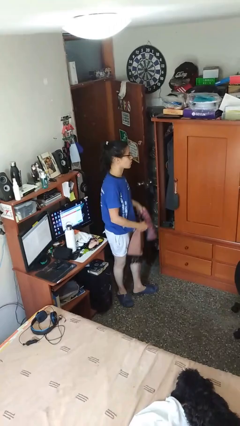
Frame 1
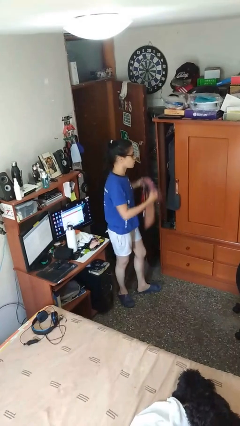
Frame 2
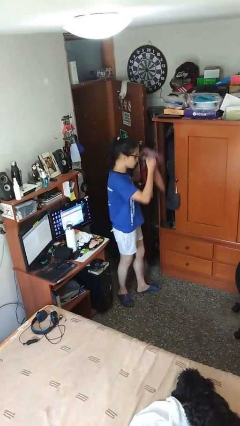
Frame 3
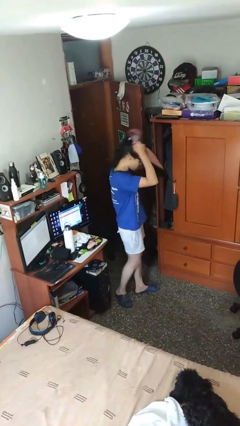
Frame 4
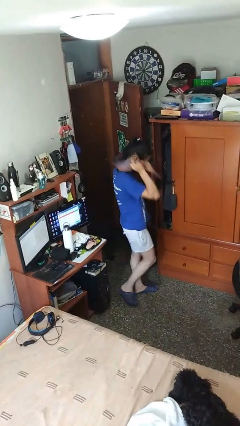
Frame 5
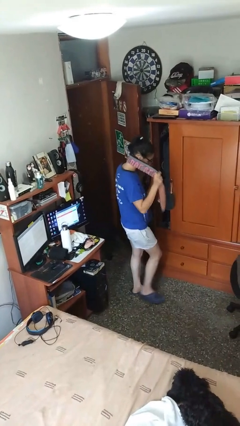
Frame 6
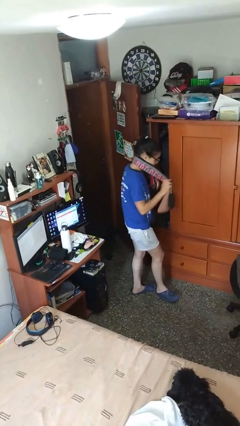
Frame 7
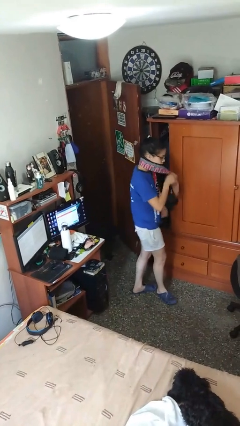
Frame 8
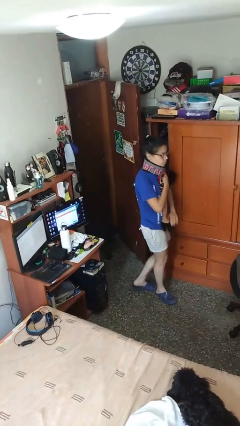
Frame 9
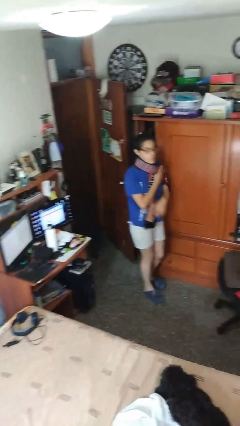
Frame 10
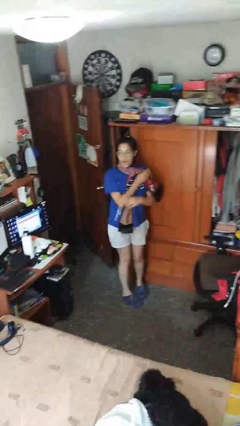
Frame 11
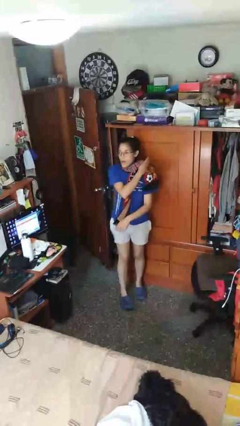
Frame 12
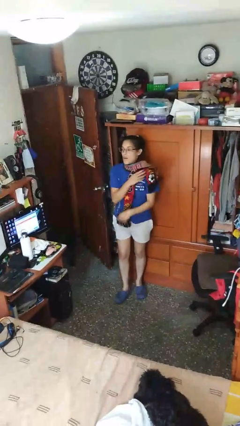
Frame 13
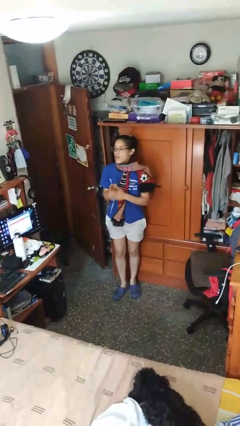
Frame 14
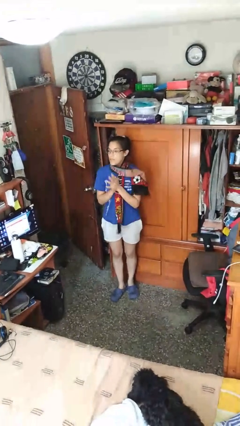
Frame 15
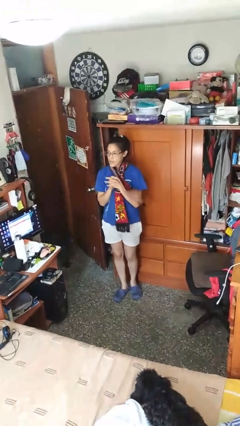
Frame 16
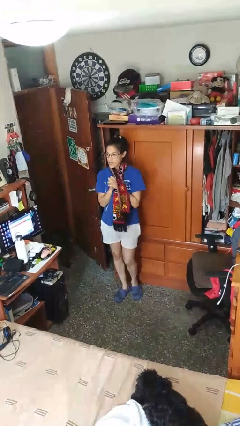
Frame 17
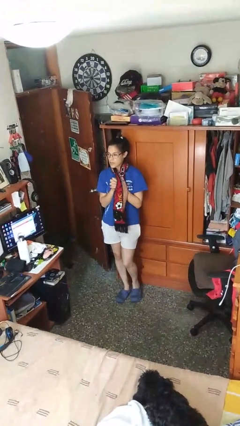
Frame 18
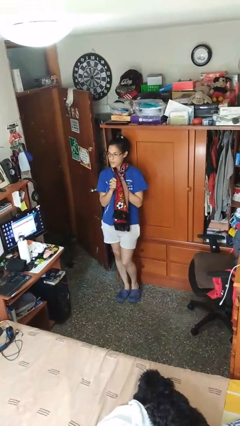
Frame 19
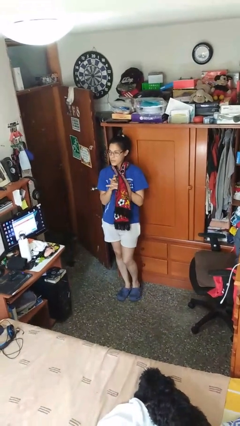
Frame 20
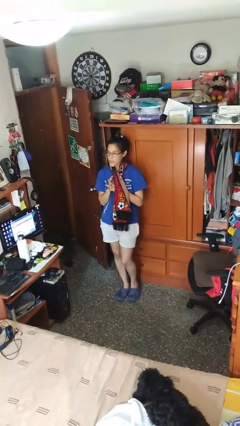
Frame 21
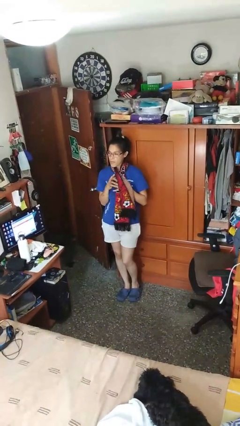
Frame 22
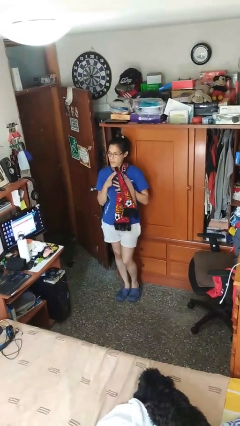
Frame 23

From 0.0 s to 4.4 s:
person puts on scarf

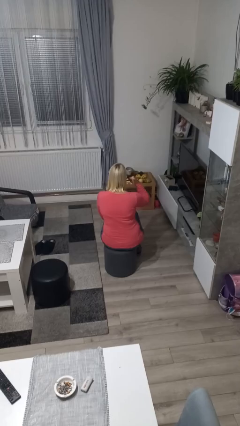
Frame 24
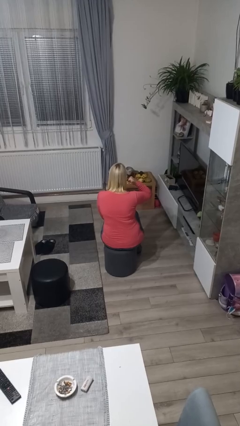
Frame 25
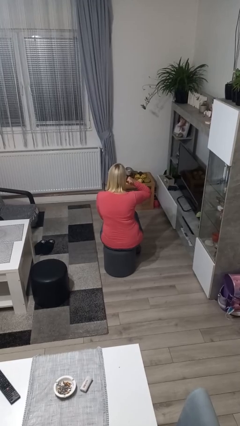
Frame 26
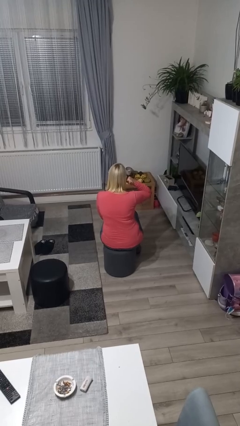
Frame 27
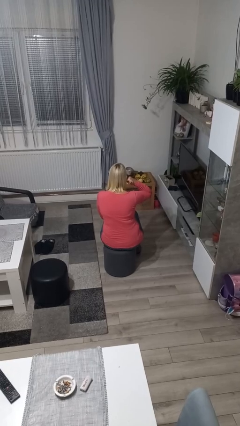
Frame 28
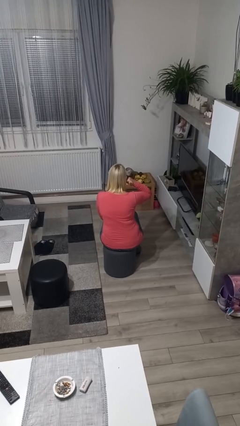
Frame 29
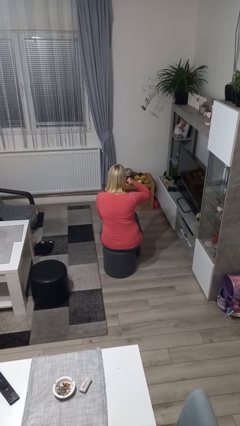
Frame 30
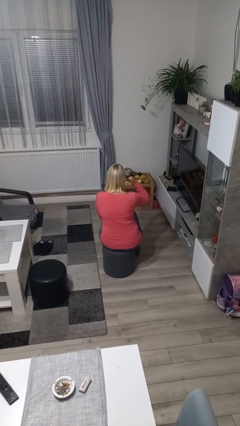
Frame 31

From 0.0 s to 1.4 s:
person gestures call me

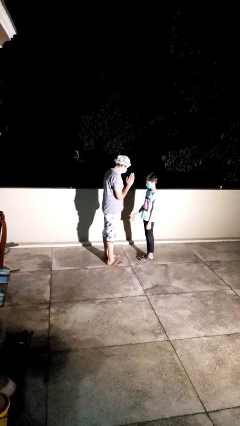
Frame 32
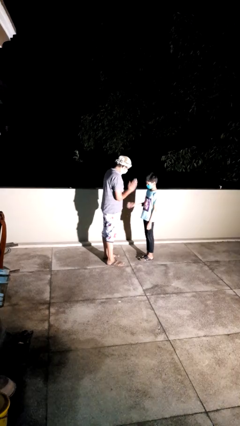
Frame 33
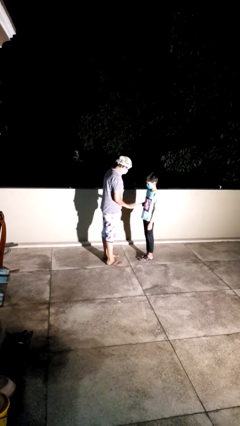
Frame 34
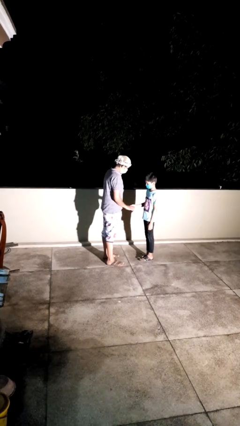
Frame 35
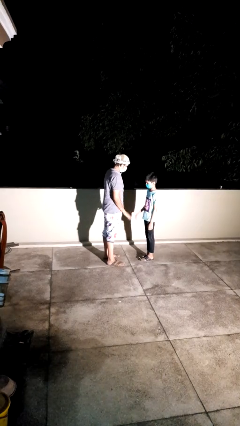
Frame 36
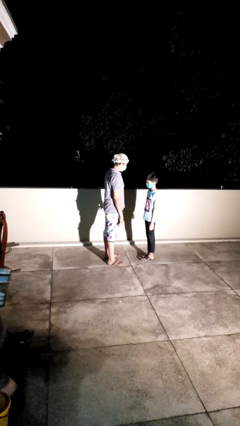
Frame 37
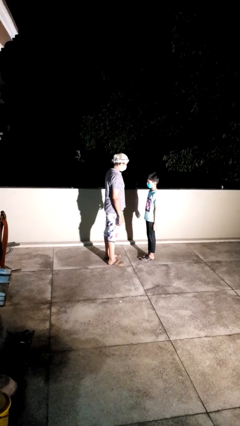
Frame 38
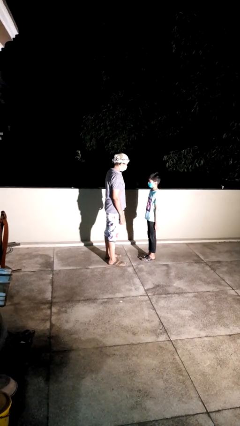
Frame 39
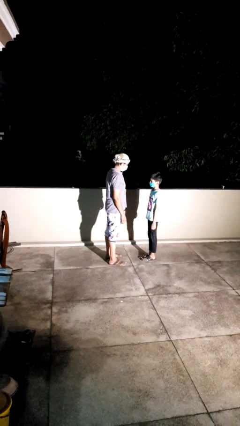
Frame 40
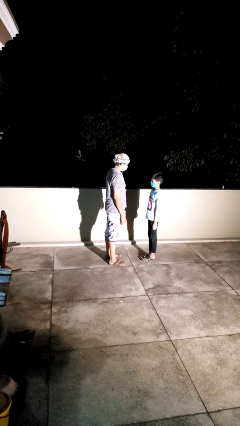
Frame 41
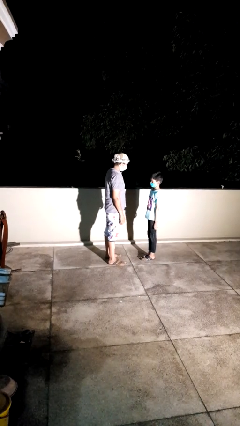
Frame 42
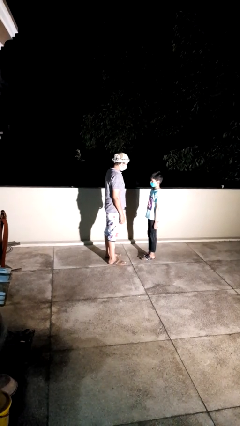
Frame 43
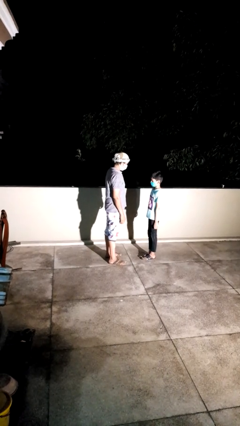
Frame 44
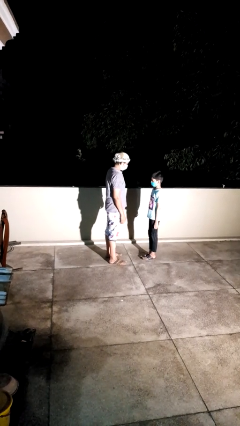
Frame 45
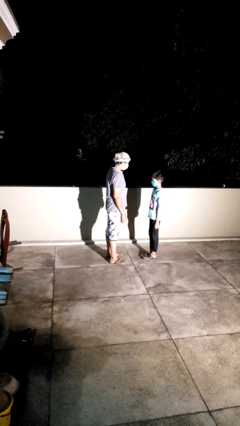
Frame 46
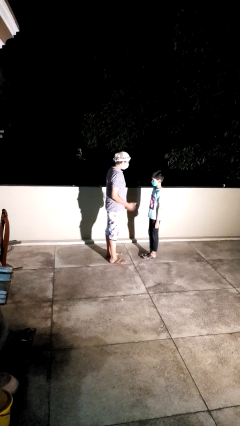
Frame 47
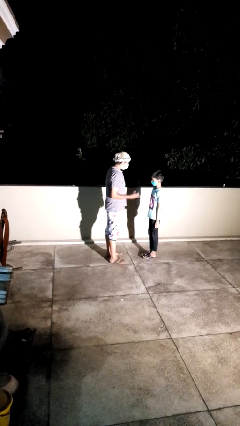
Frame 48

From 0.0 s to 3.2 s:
person highfives hand

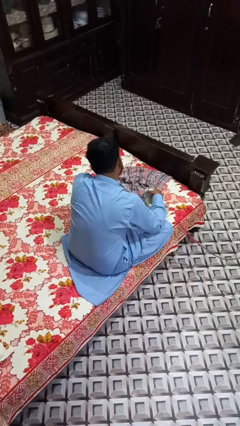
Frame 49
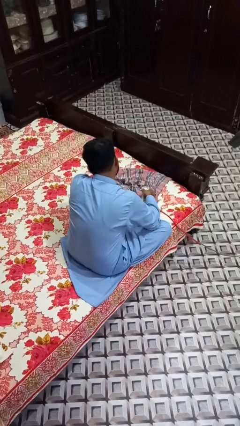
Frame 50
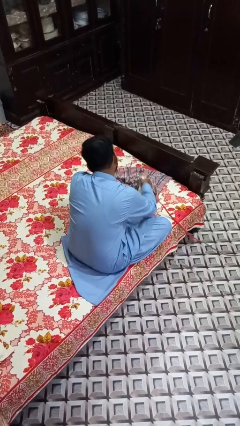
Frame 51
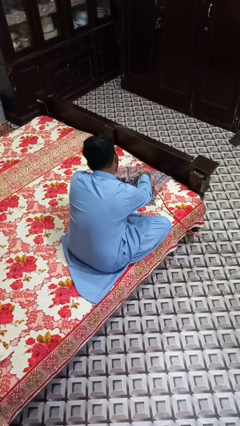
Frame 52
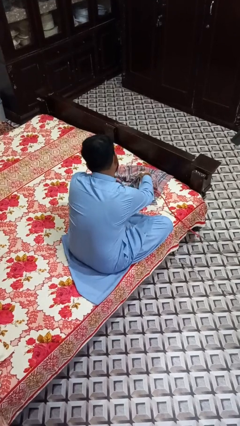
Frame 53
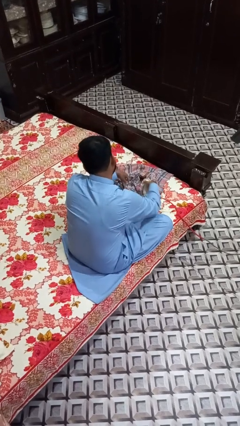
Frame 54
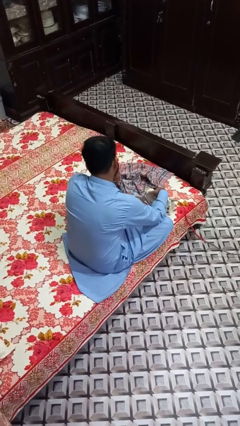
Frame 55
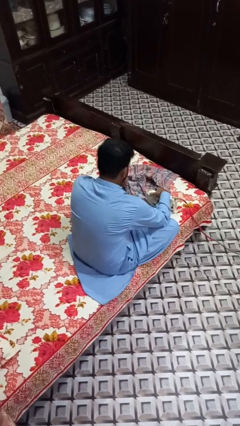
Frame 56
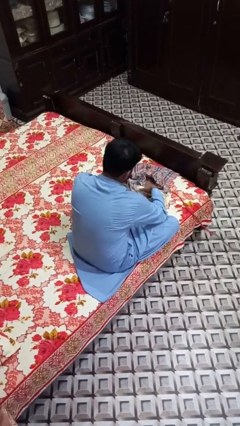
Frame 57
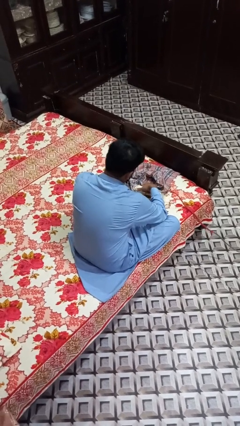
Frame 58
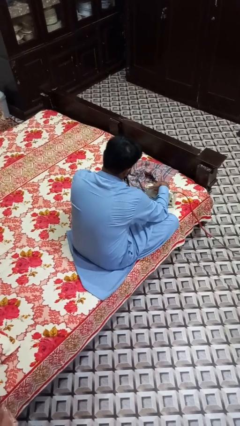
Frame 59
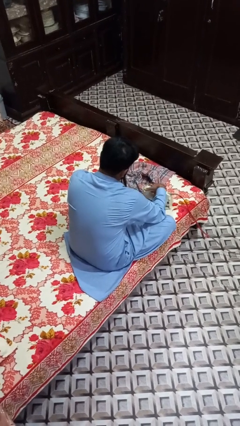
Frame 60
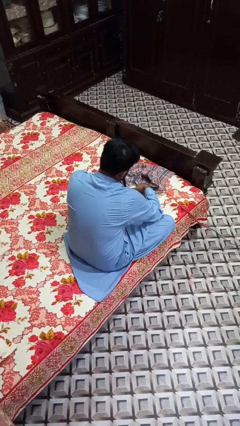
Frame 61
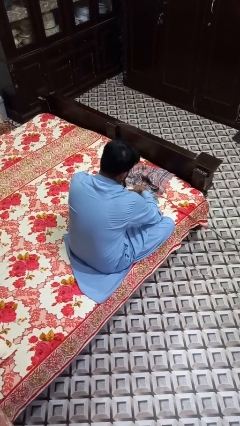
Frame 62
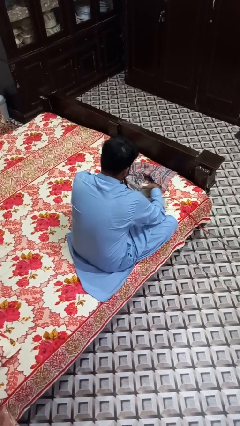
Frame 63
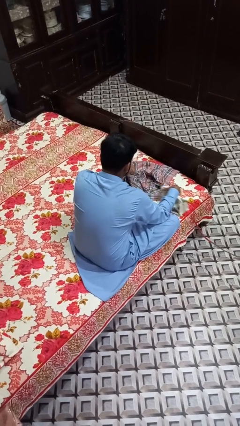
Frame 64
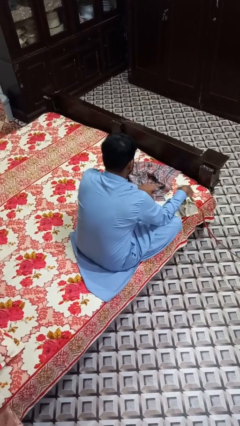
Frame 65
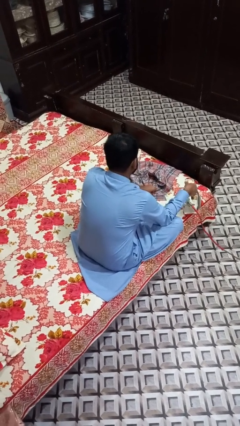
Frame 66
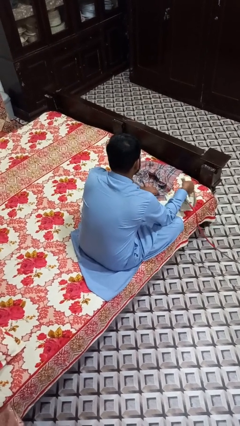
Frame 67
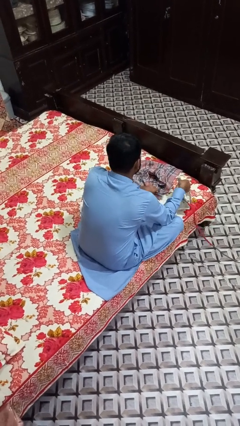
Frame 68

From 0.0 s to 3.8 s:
person irons clothes

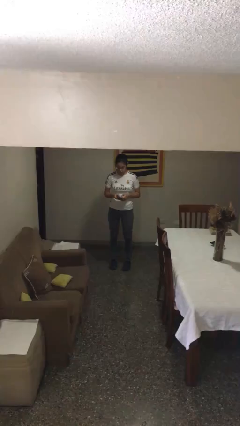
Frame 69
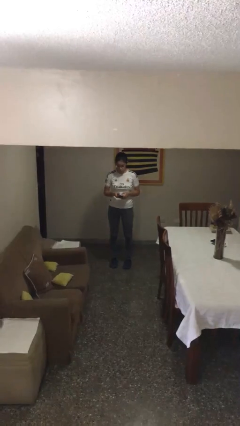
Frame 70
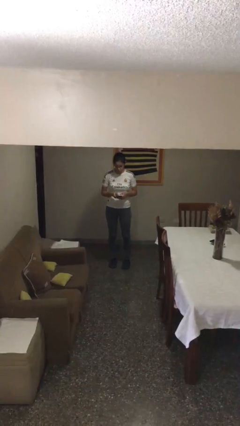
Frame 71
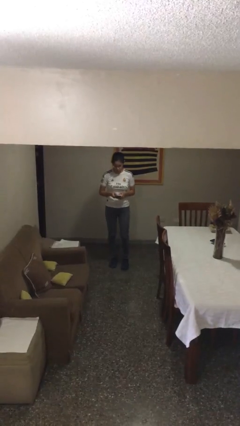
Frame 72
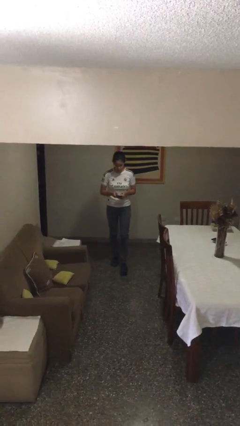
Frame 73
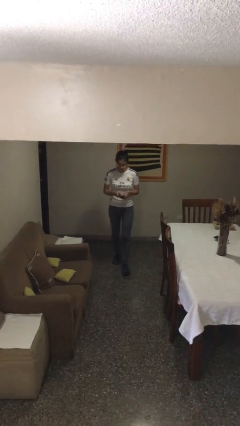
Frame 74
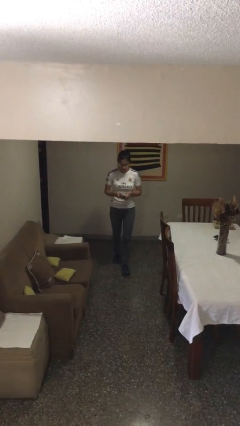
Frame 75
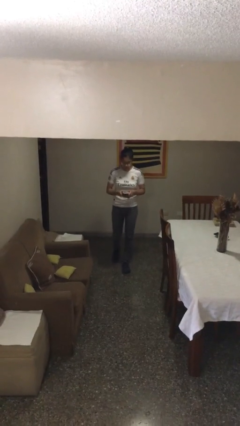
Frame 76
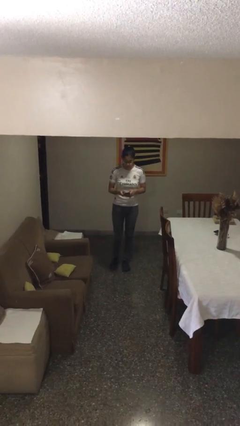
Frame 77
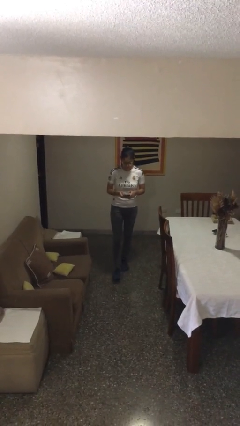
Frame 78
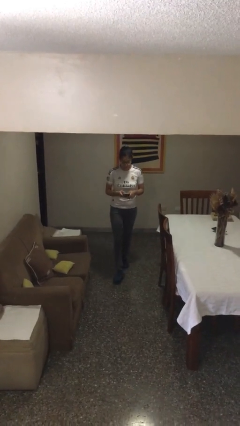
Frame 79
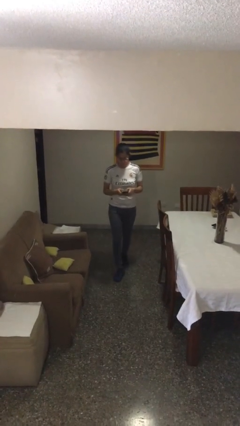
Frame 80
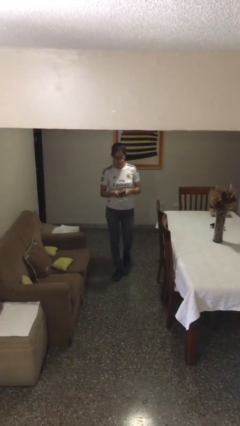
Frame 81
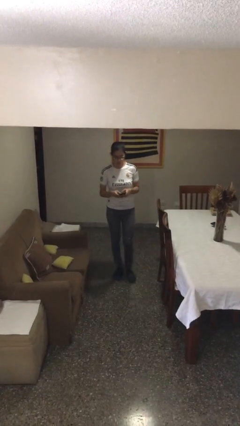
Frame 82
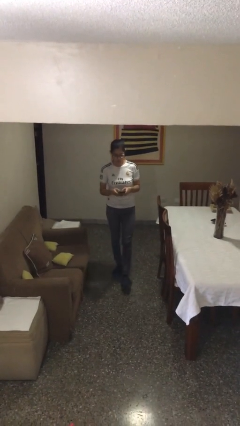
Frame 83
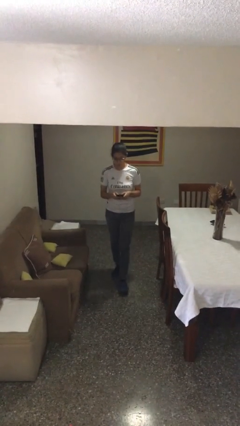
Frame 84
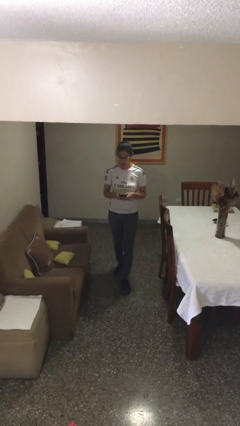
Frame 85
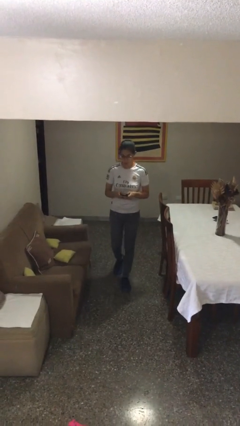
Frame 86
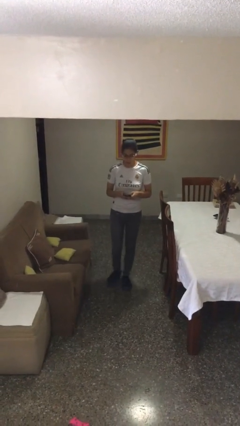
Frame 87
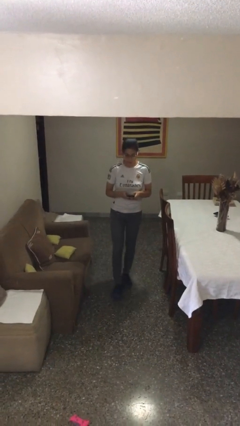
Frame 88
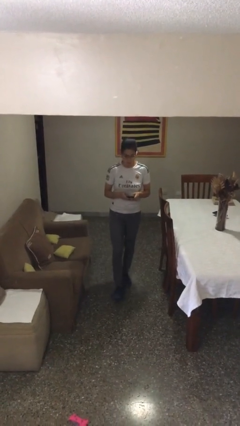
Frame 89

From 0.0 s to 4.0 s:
person texts on phone

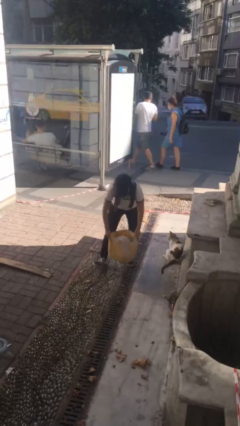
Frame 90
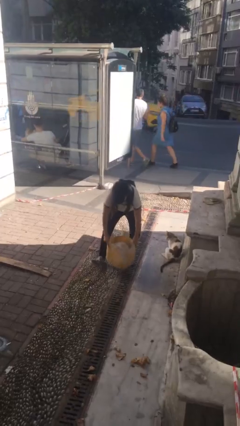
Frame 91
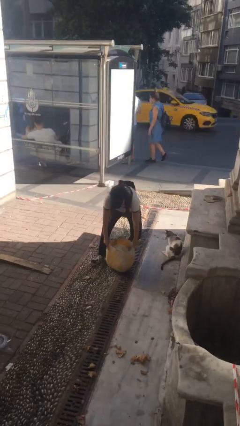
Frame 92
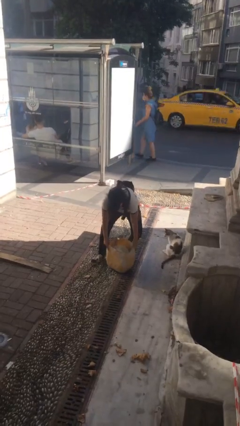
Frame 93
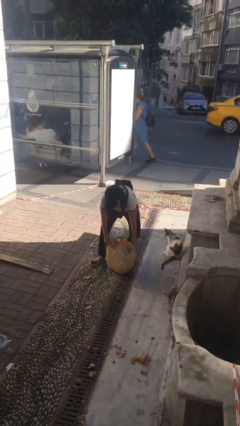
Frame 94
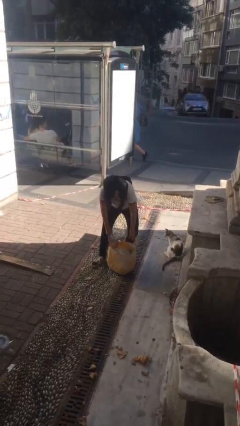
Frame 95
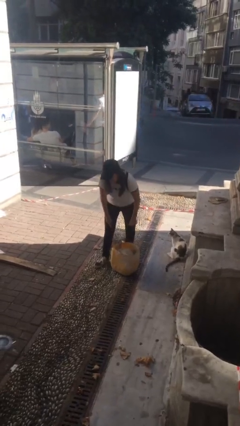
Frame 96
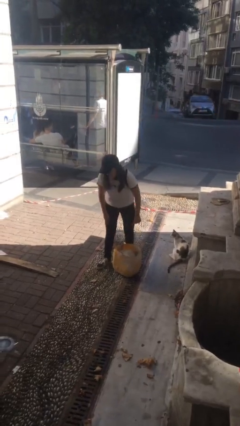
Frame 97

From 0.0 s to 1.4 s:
person puts down object on floor
